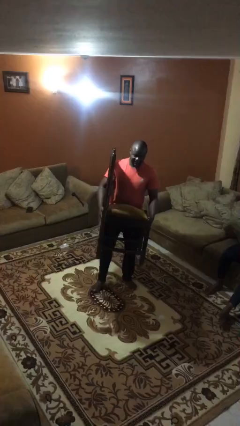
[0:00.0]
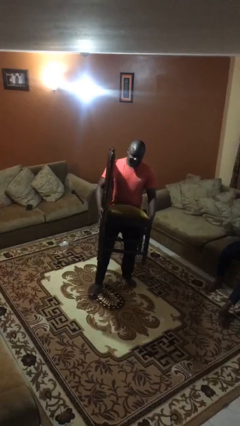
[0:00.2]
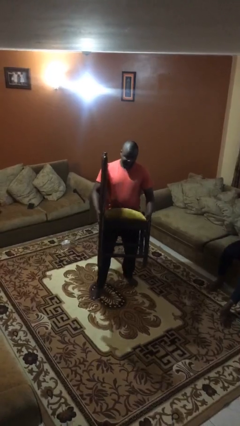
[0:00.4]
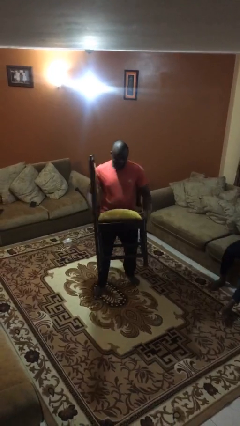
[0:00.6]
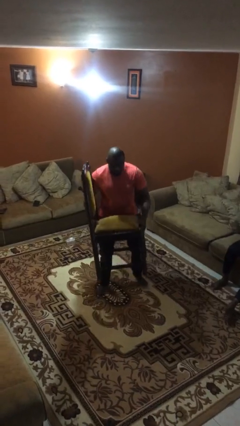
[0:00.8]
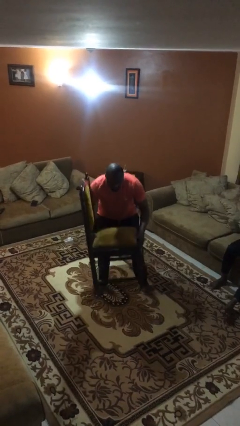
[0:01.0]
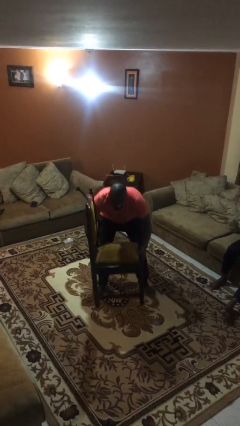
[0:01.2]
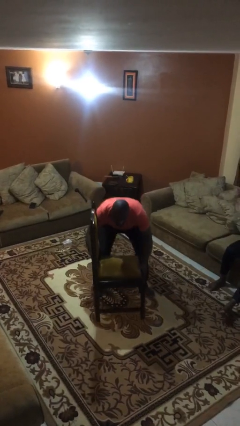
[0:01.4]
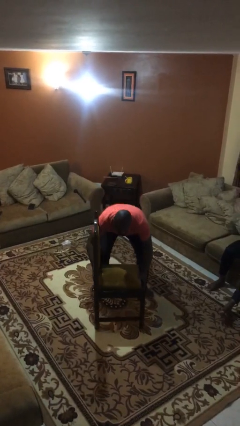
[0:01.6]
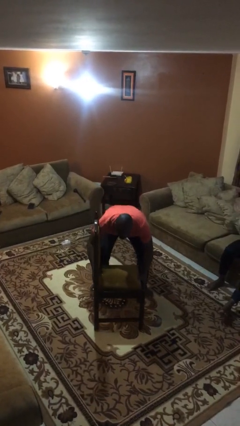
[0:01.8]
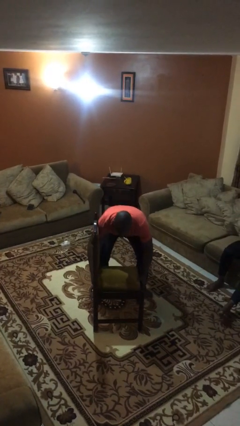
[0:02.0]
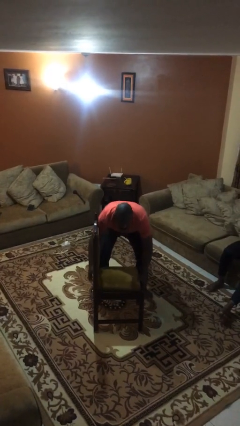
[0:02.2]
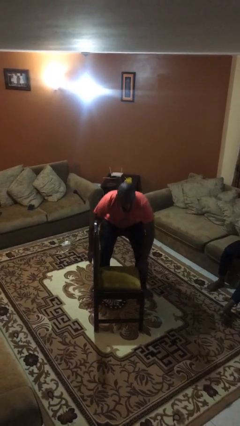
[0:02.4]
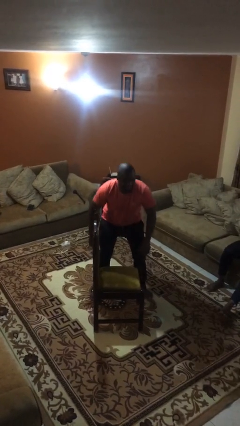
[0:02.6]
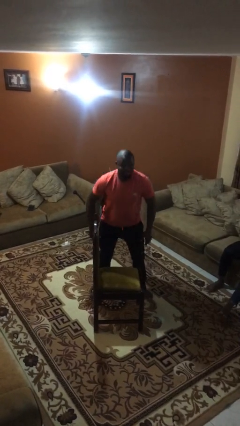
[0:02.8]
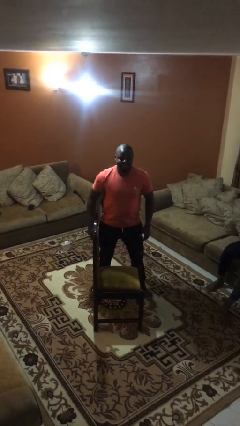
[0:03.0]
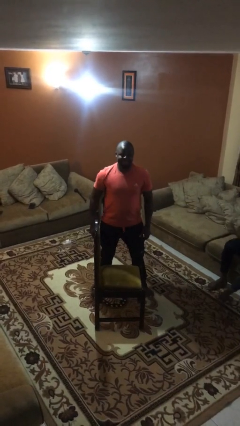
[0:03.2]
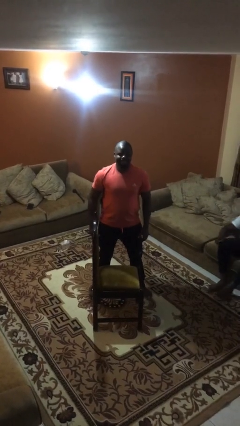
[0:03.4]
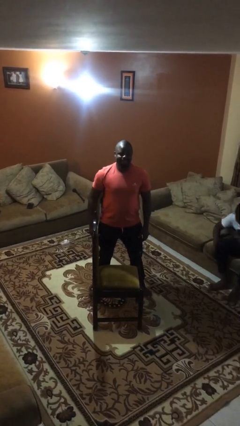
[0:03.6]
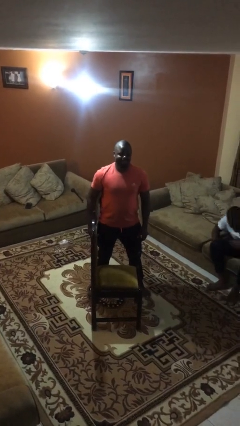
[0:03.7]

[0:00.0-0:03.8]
person puts down object on floor

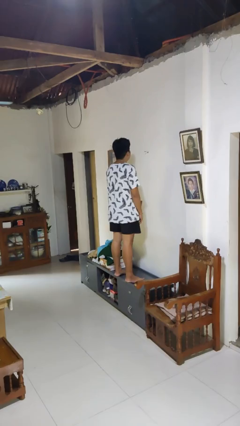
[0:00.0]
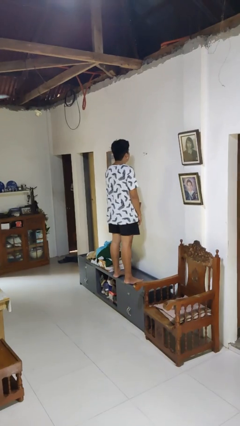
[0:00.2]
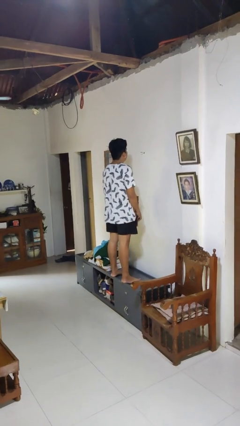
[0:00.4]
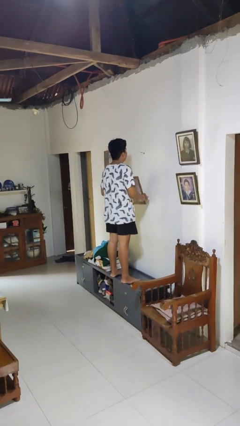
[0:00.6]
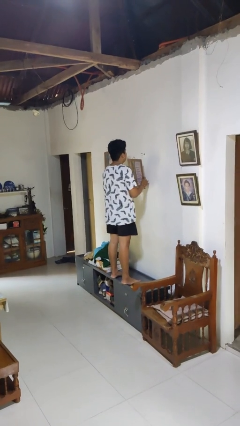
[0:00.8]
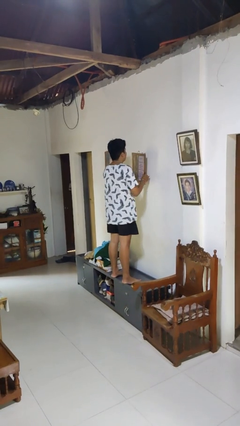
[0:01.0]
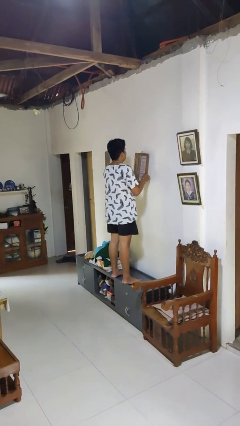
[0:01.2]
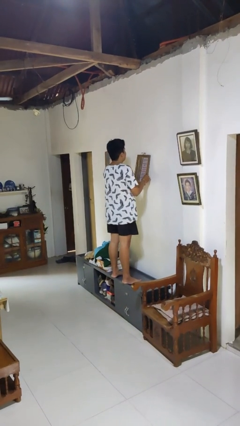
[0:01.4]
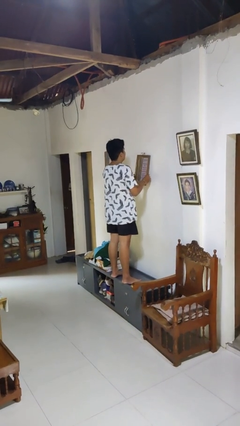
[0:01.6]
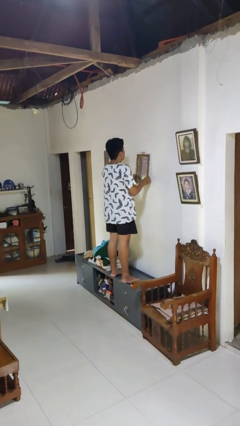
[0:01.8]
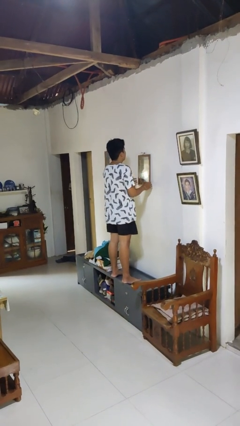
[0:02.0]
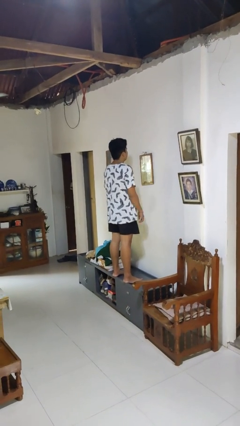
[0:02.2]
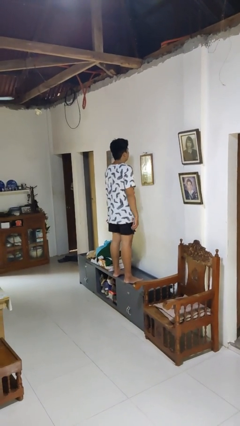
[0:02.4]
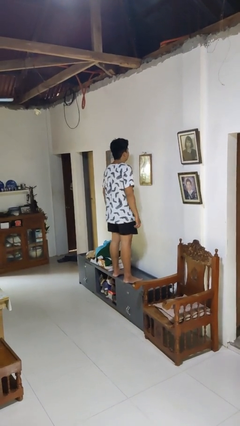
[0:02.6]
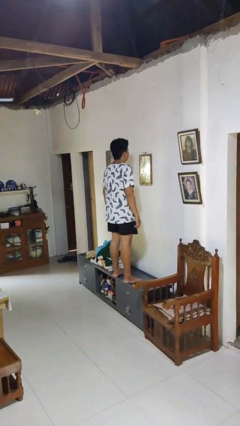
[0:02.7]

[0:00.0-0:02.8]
person puts up picture frame

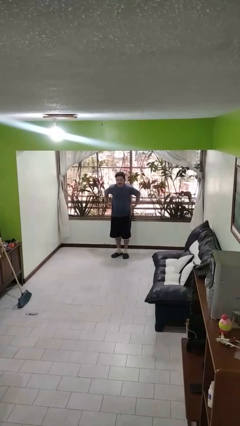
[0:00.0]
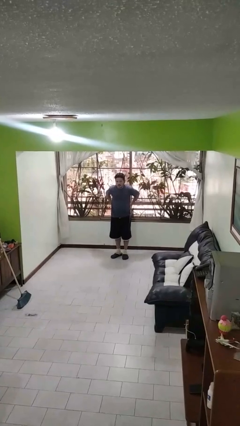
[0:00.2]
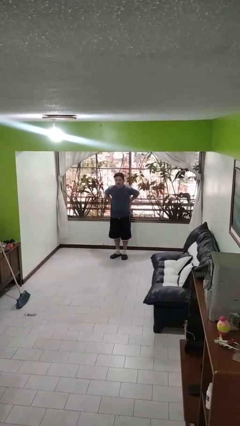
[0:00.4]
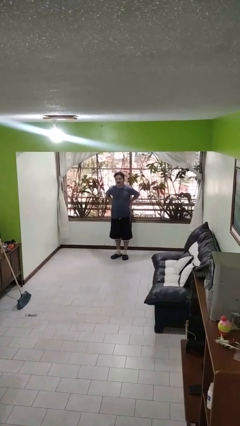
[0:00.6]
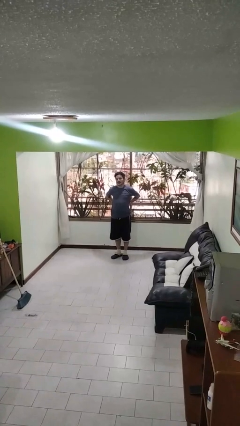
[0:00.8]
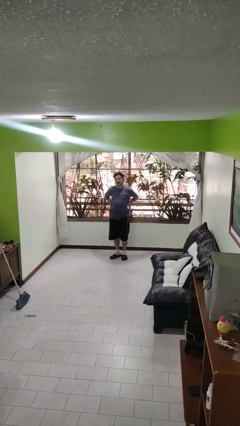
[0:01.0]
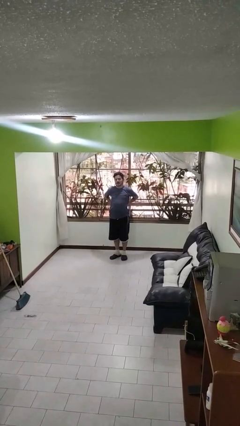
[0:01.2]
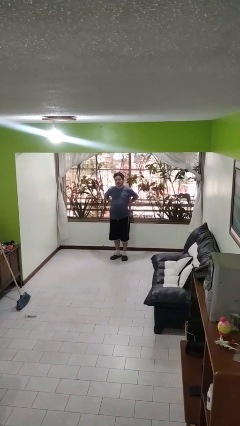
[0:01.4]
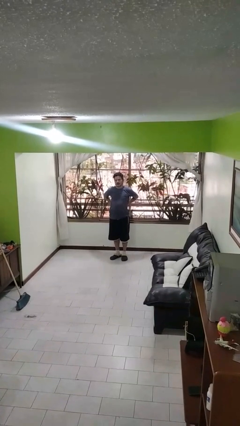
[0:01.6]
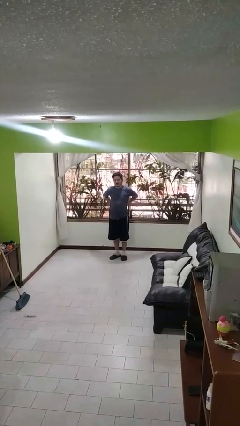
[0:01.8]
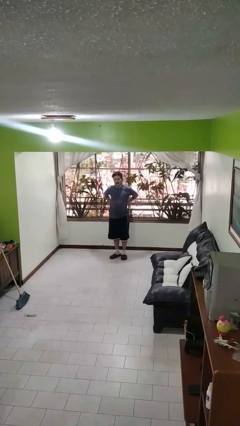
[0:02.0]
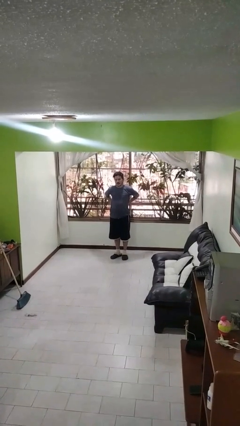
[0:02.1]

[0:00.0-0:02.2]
person stretches back

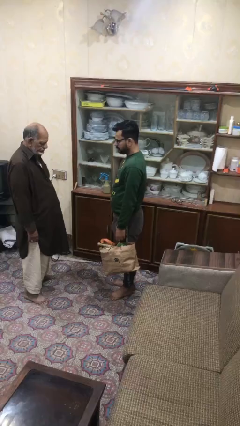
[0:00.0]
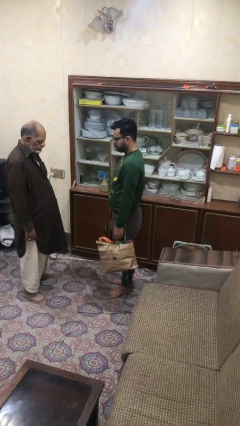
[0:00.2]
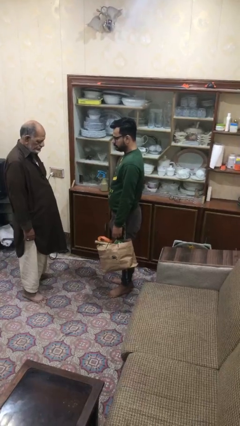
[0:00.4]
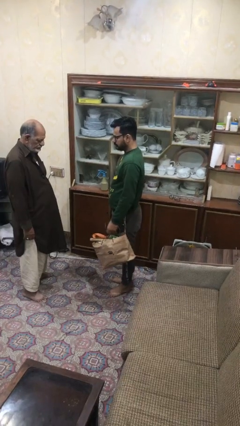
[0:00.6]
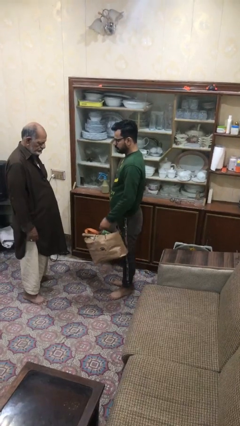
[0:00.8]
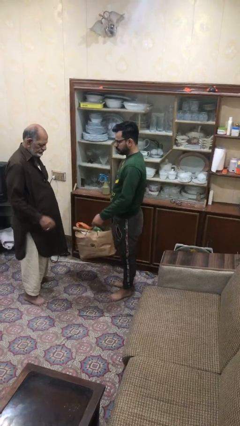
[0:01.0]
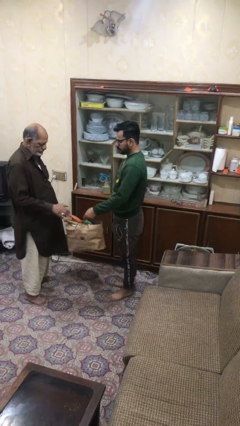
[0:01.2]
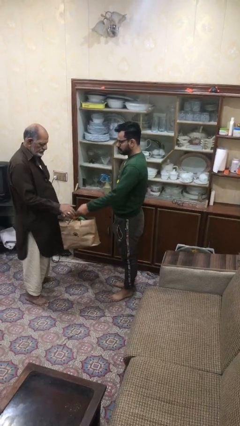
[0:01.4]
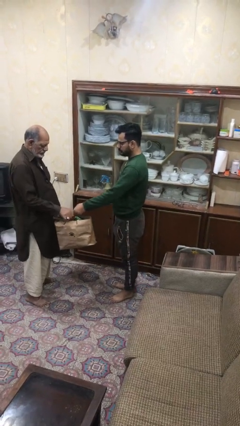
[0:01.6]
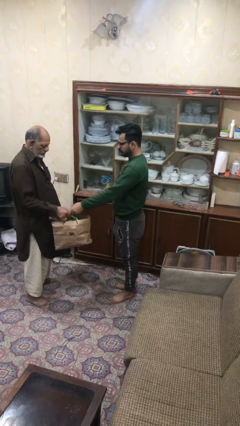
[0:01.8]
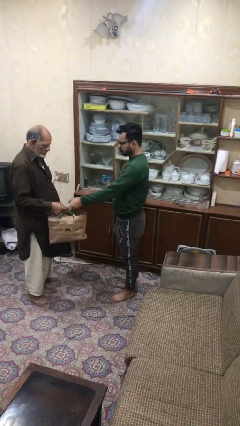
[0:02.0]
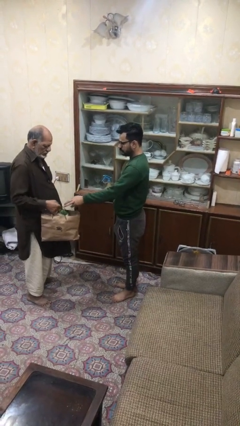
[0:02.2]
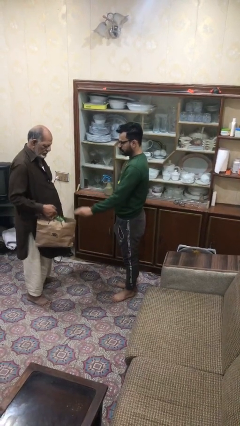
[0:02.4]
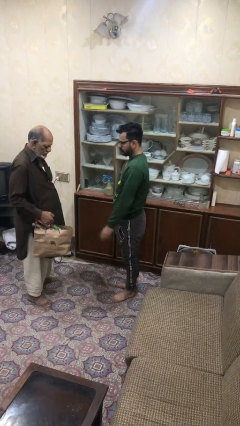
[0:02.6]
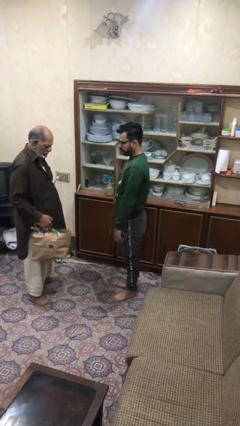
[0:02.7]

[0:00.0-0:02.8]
person transfers object to person

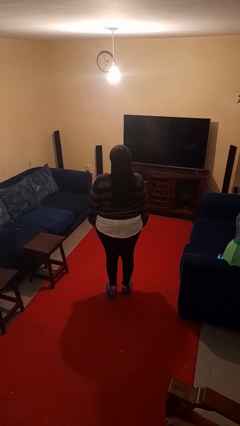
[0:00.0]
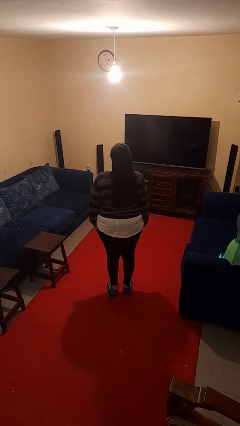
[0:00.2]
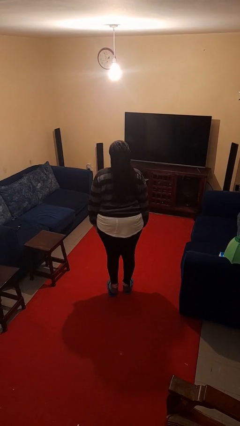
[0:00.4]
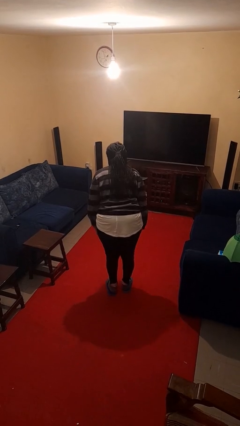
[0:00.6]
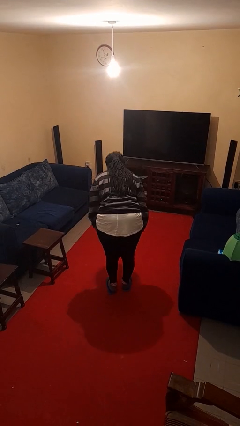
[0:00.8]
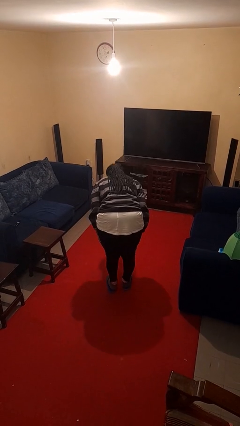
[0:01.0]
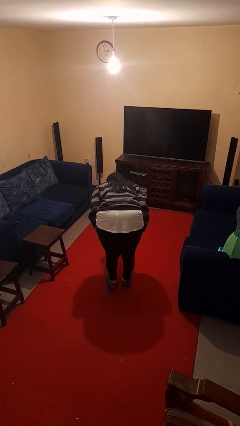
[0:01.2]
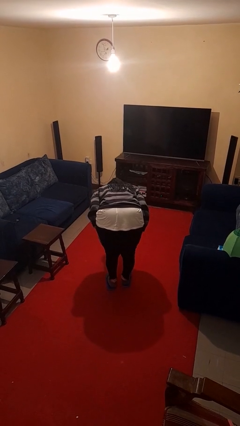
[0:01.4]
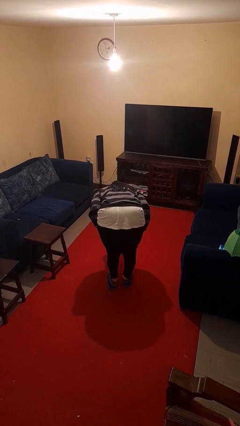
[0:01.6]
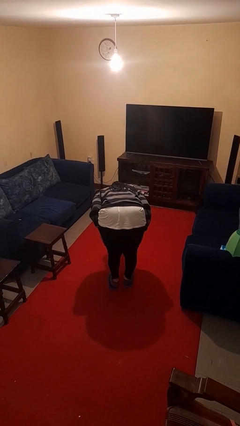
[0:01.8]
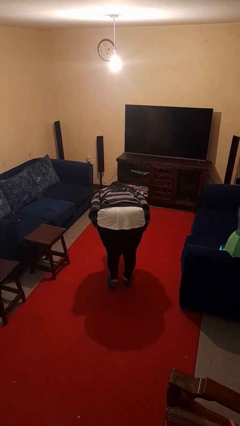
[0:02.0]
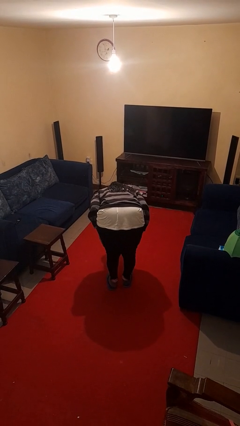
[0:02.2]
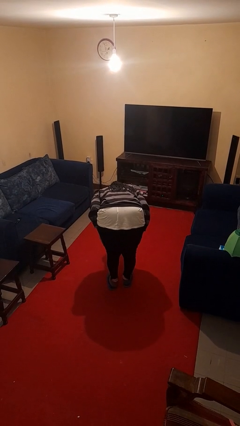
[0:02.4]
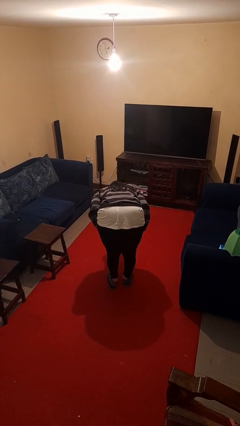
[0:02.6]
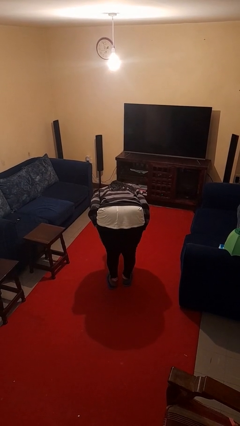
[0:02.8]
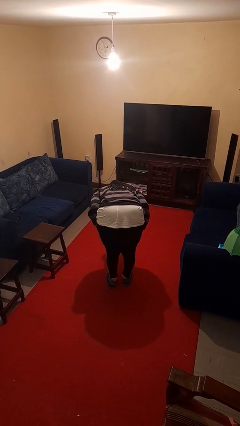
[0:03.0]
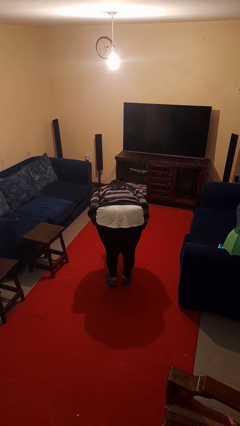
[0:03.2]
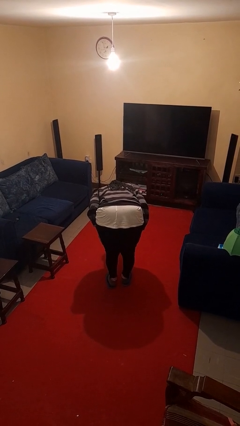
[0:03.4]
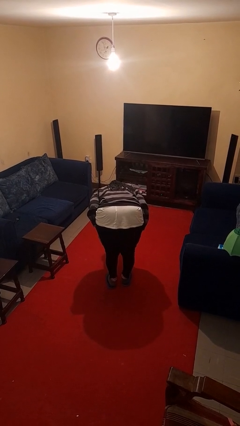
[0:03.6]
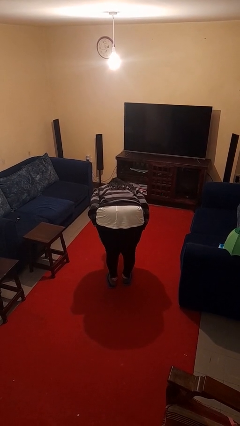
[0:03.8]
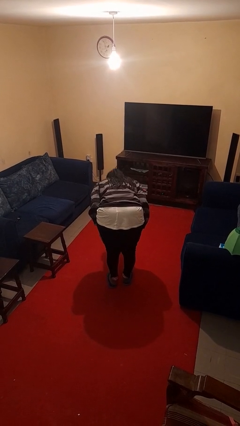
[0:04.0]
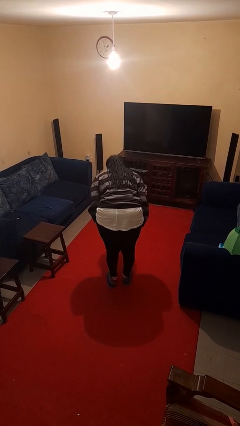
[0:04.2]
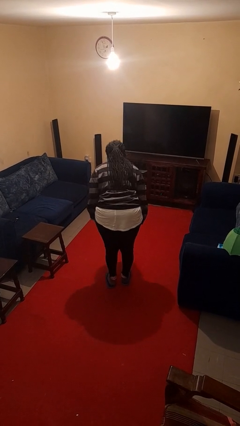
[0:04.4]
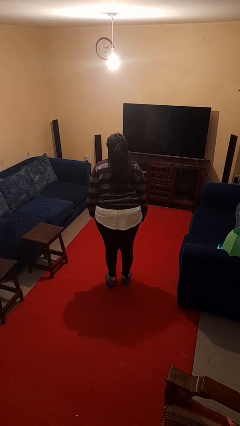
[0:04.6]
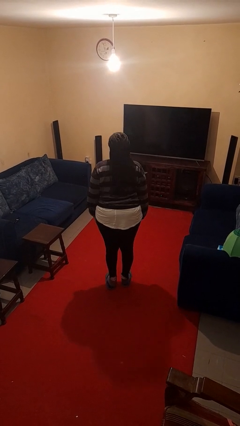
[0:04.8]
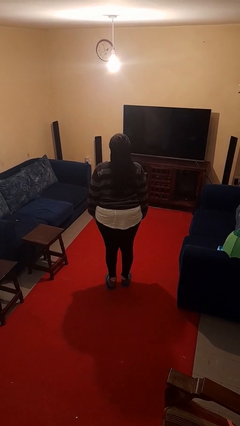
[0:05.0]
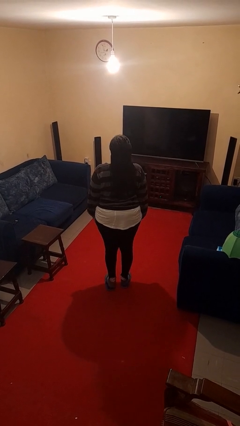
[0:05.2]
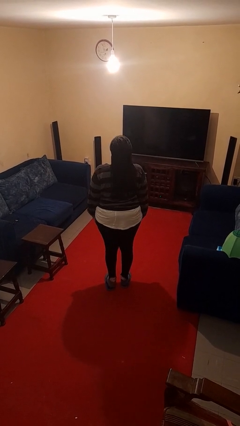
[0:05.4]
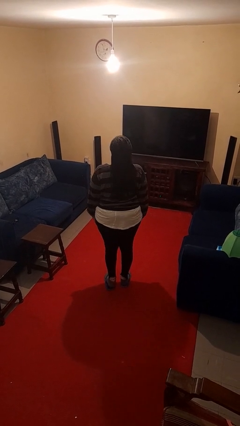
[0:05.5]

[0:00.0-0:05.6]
person bows

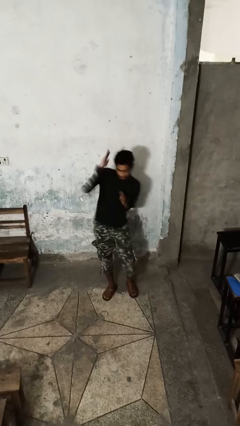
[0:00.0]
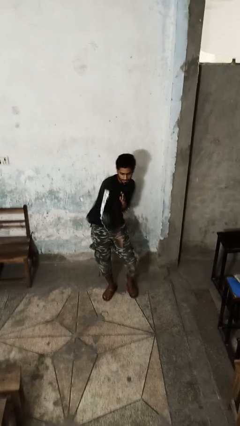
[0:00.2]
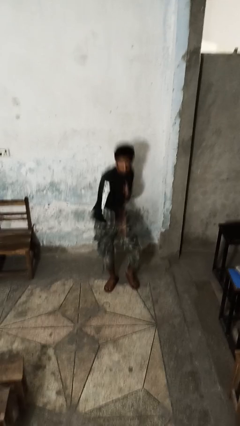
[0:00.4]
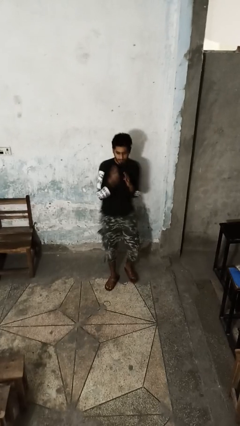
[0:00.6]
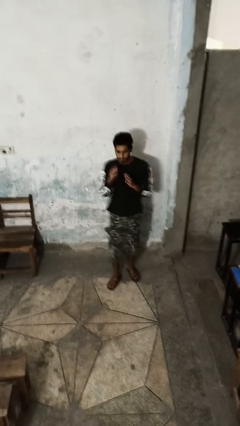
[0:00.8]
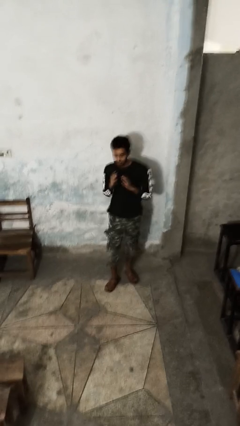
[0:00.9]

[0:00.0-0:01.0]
person karate chop
